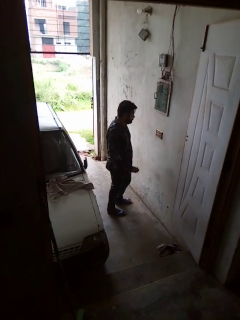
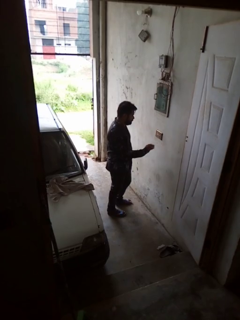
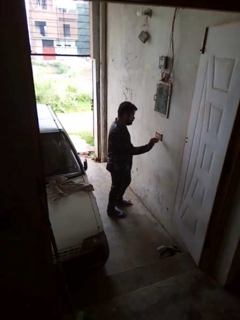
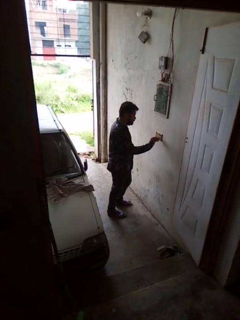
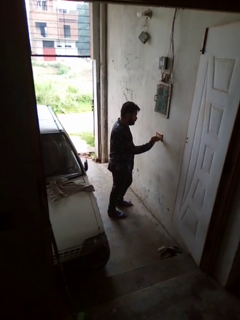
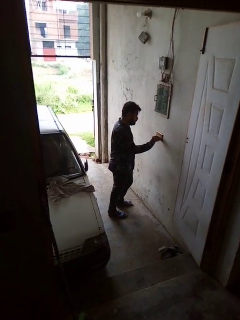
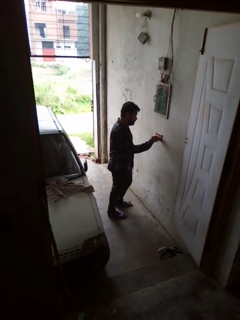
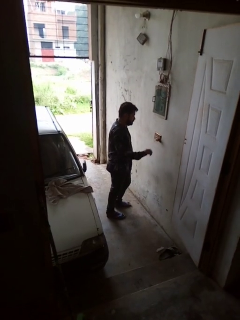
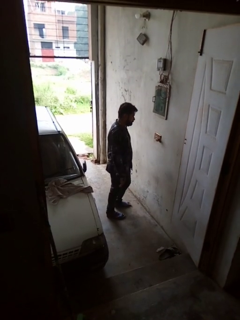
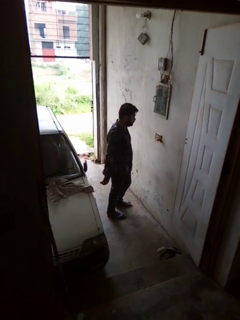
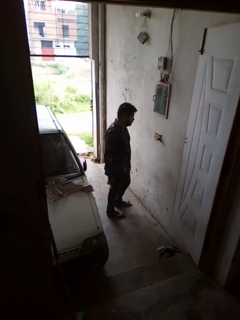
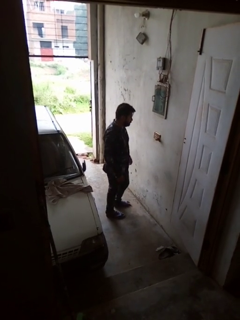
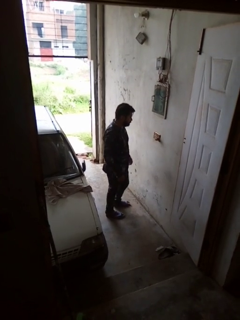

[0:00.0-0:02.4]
person plugs into electrical socket

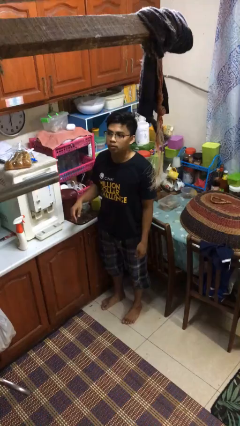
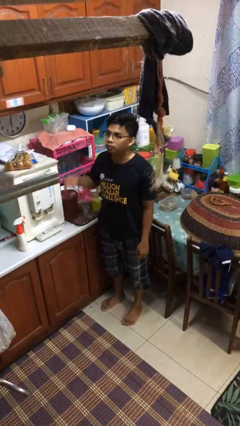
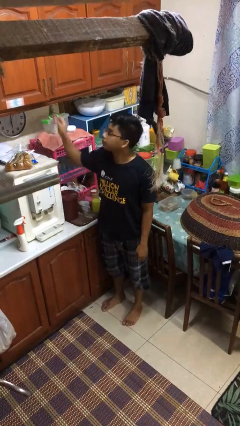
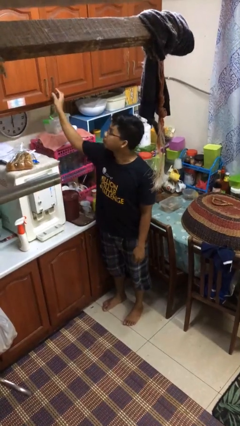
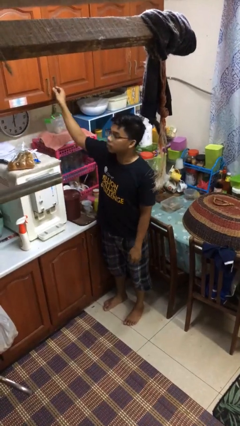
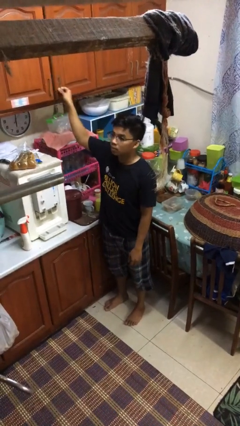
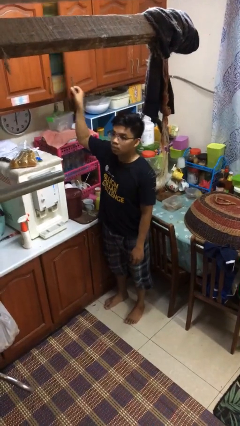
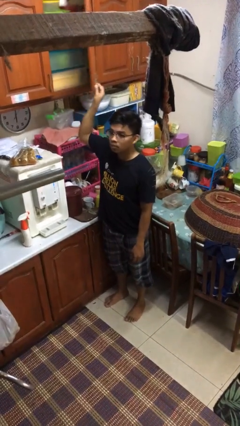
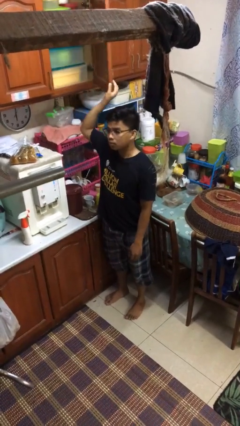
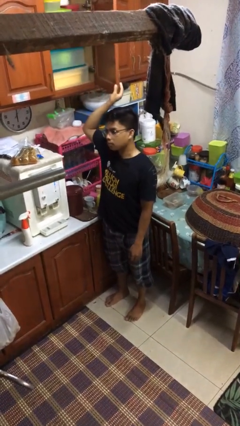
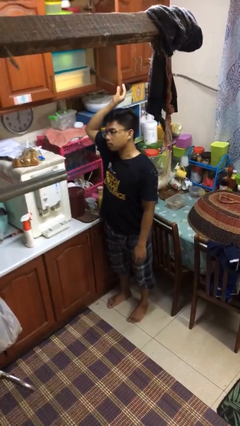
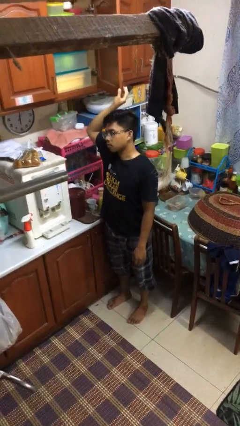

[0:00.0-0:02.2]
person opens kitchen drawer

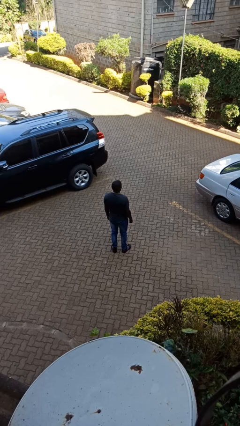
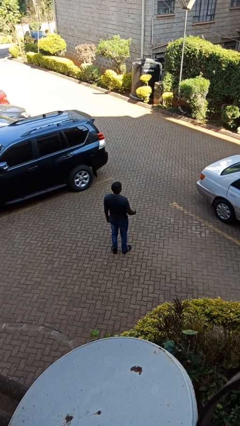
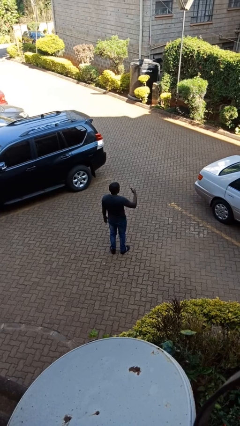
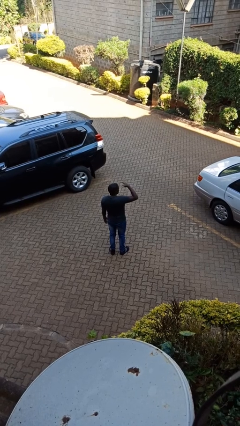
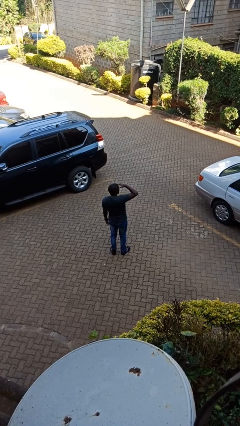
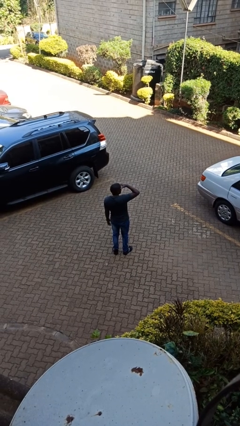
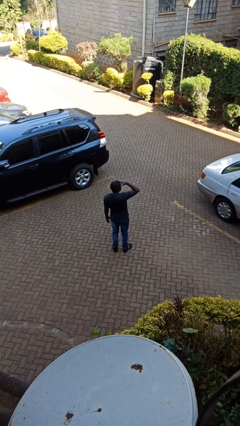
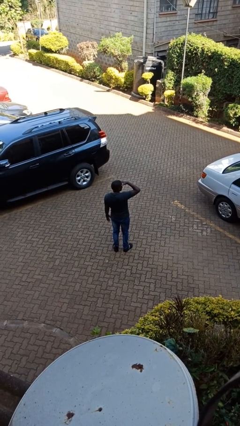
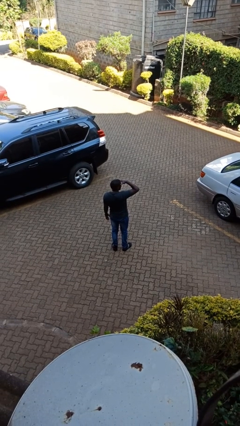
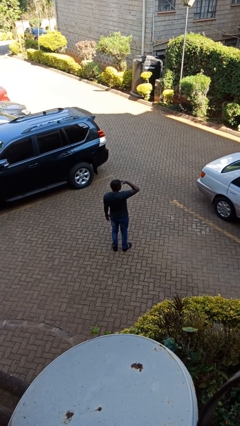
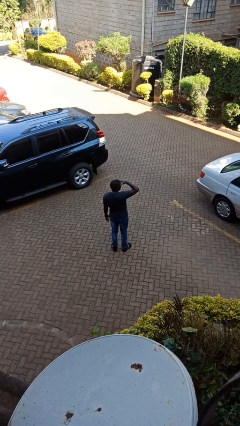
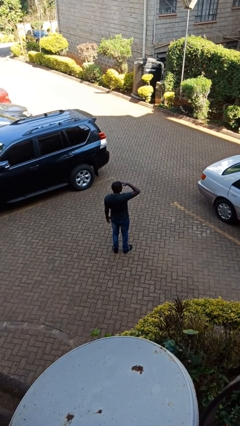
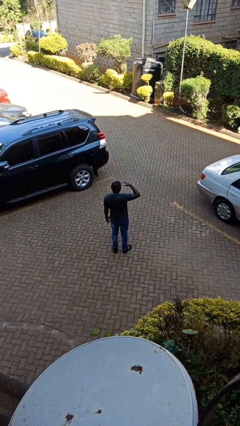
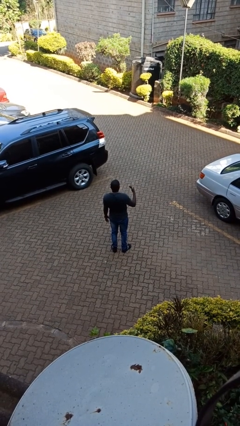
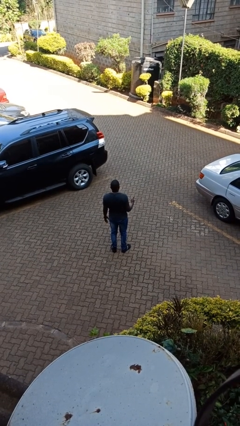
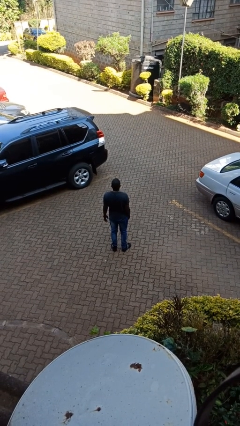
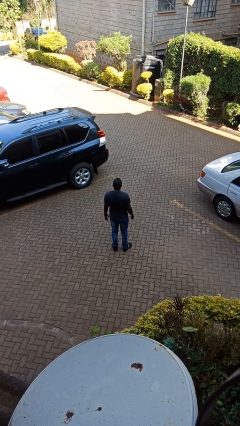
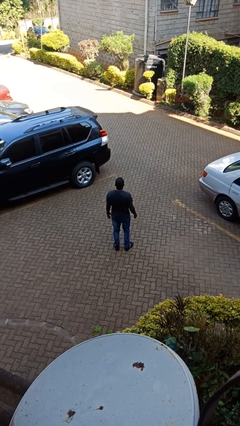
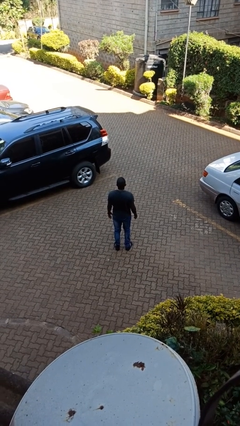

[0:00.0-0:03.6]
person shades eyes

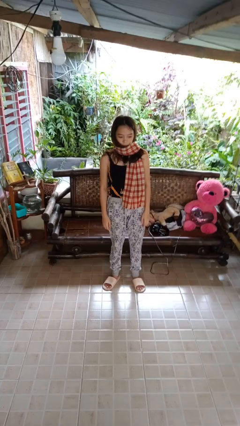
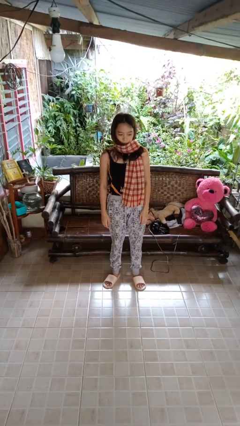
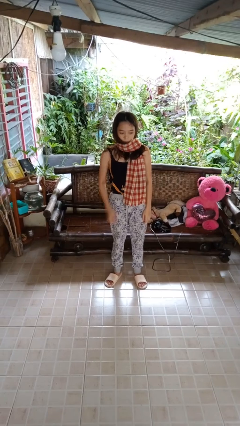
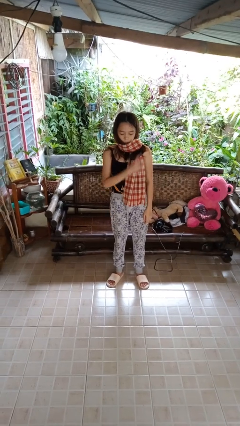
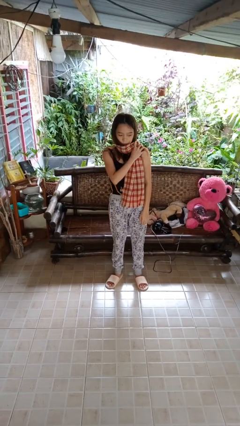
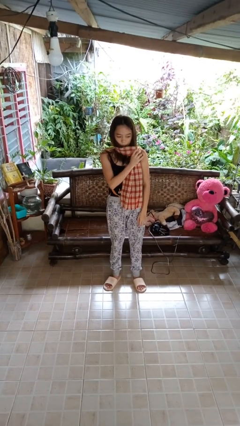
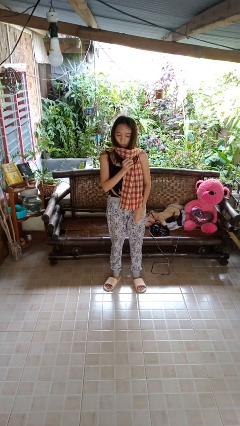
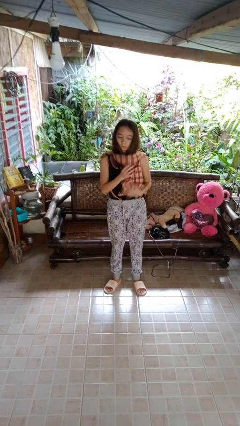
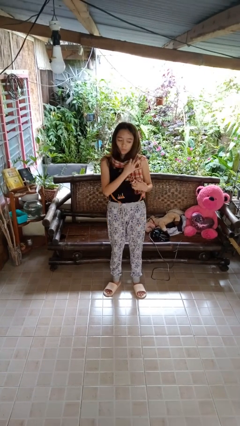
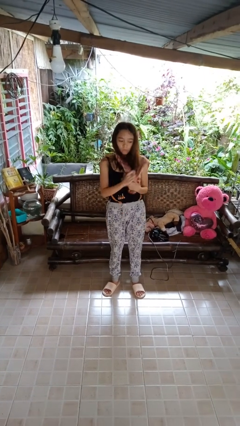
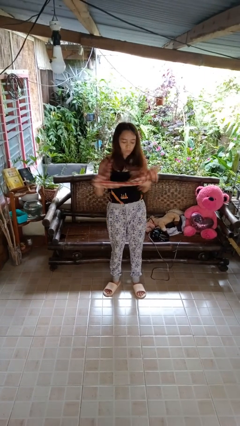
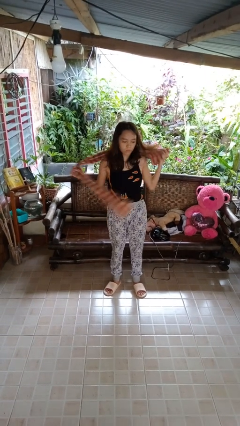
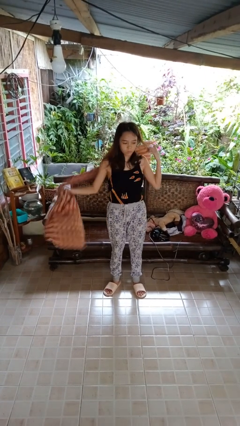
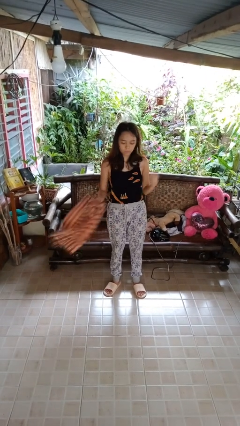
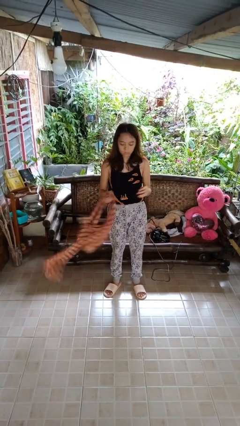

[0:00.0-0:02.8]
person takes off scarf

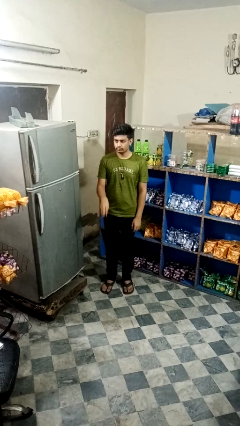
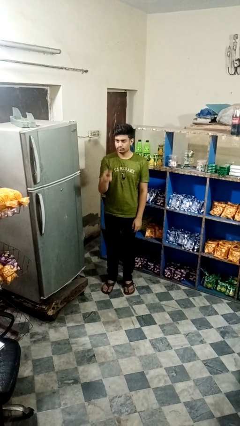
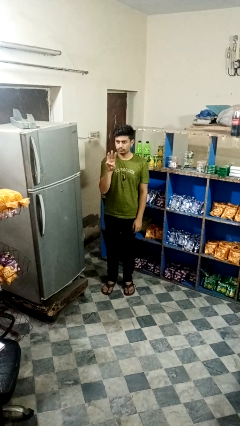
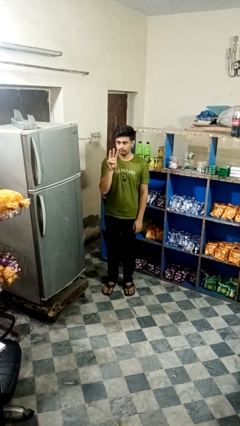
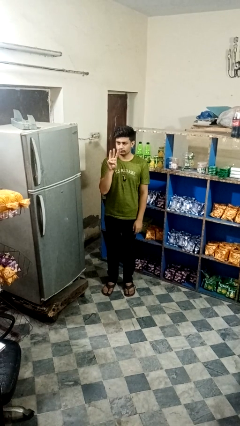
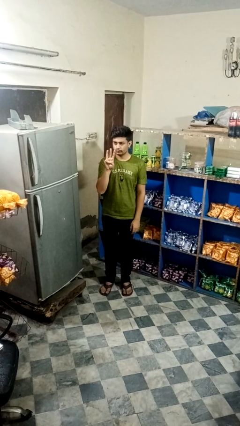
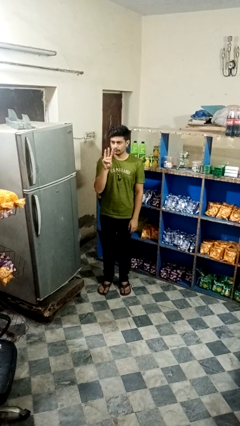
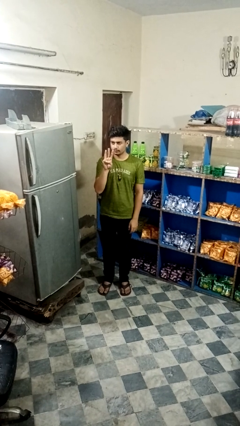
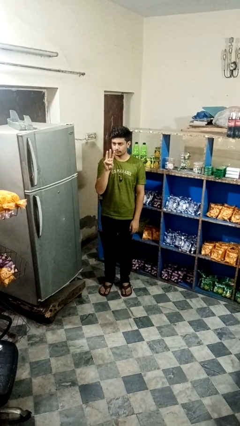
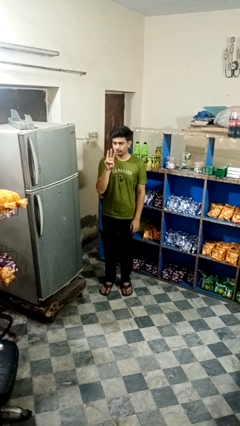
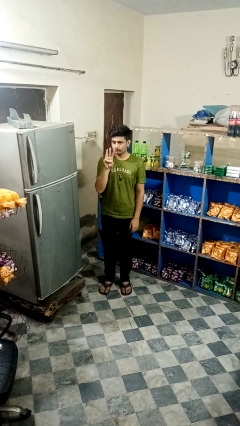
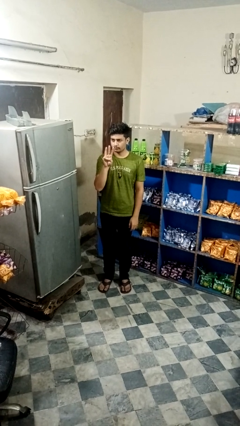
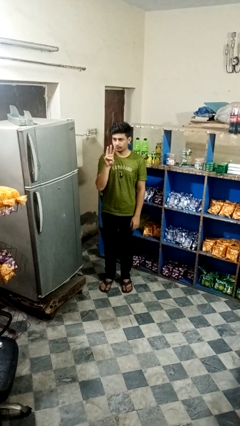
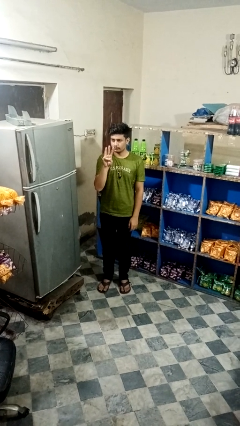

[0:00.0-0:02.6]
person gestures number three

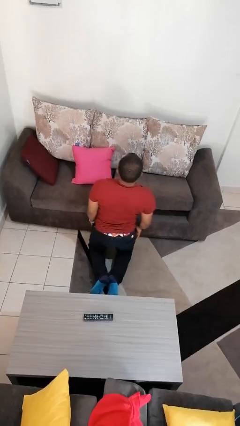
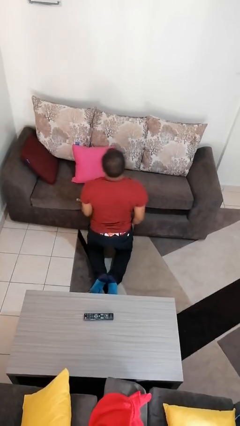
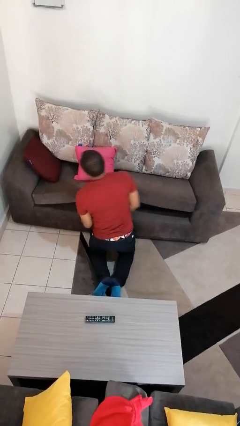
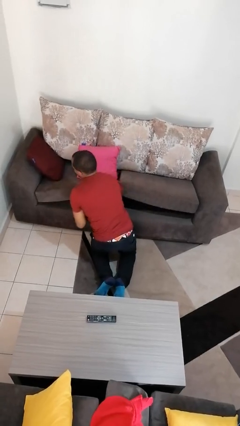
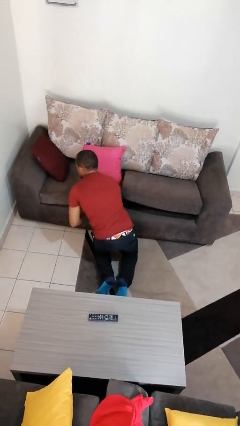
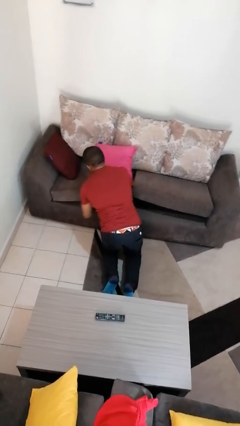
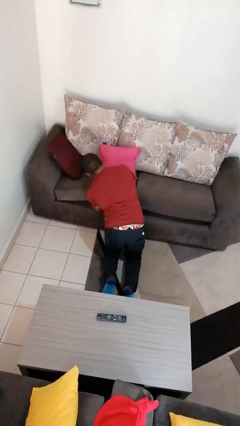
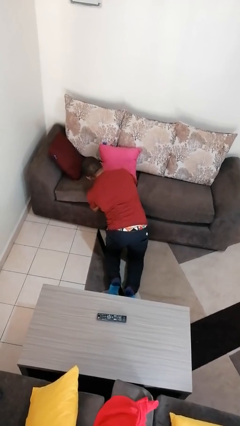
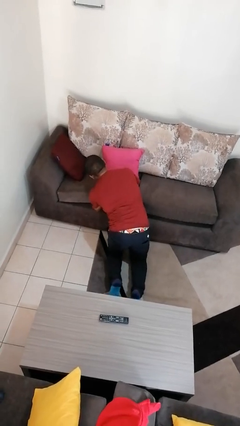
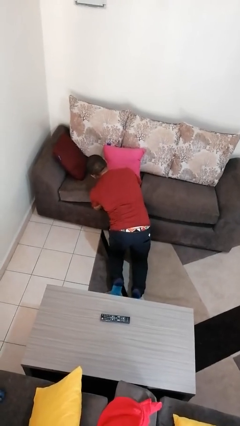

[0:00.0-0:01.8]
person searches under couch

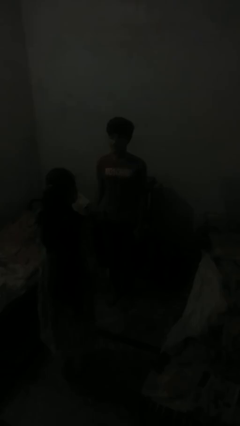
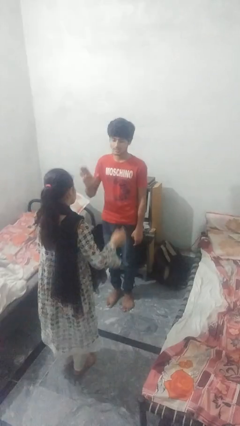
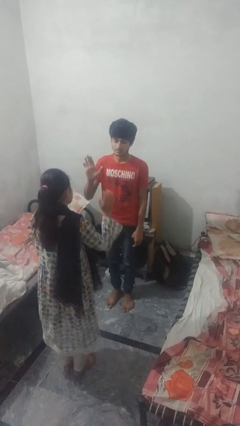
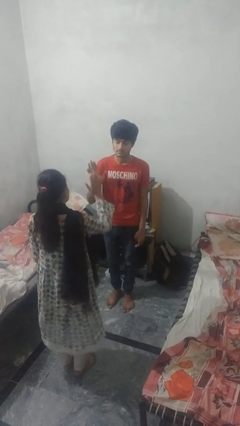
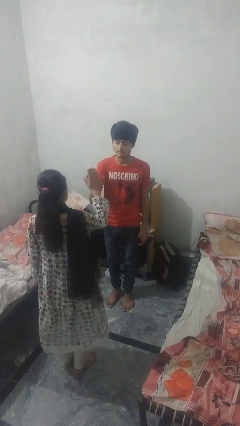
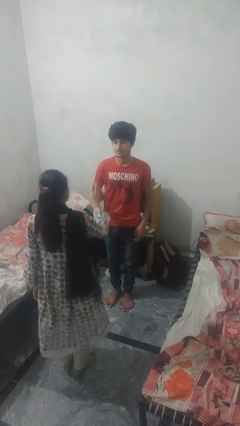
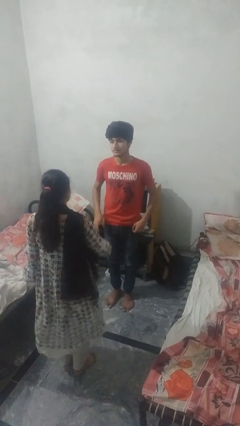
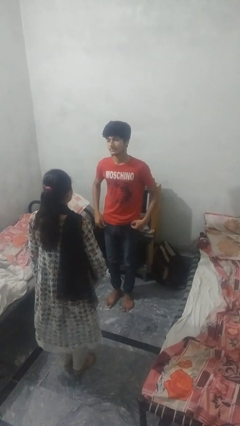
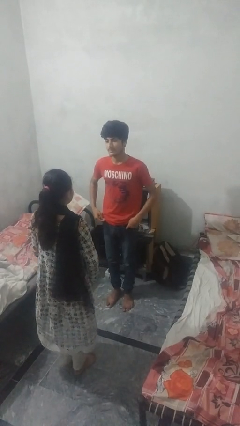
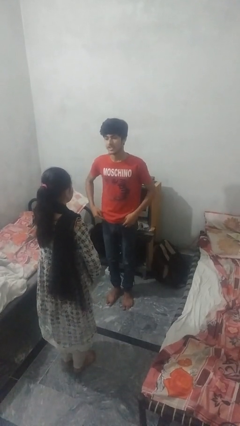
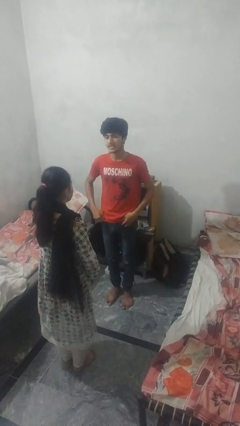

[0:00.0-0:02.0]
person highfives hand

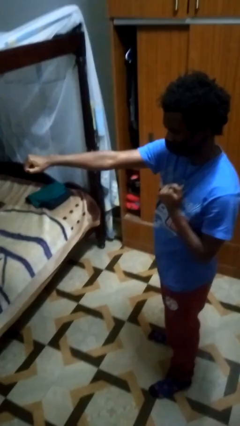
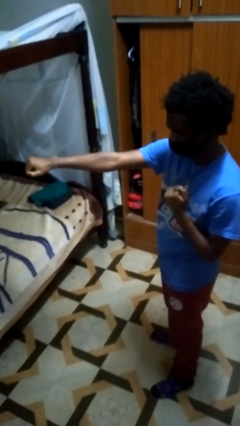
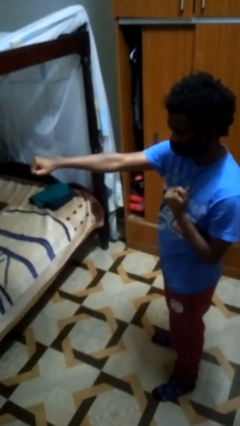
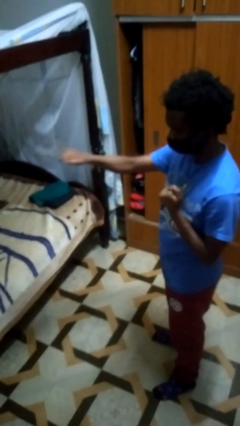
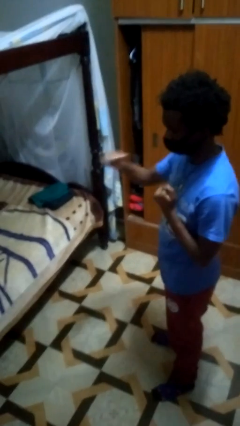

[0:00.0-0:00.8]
person punches
